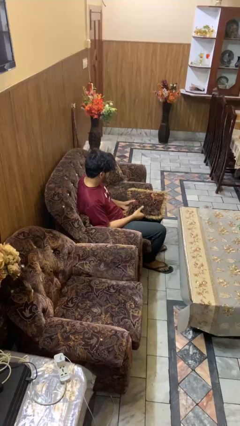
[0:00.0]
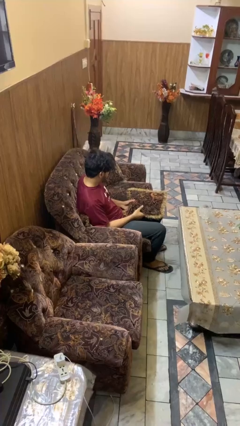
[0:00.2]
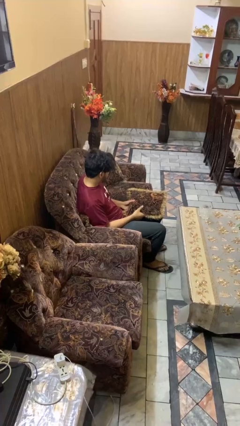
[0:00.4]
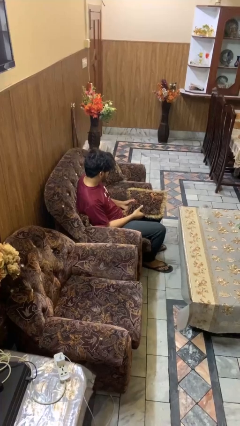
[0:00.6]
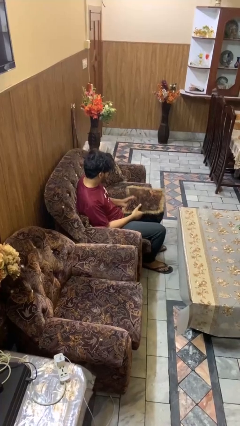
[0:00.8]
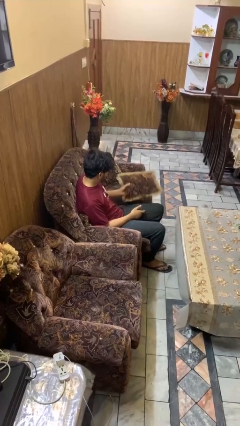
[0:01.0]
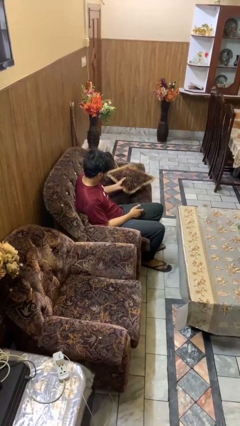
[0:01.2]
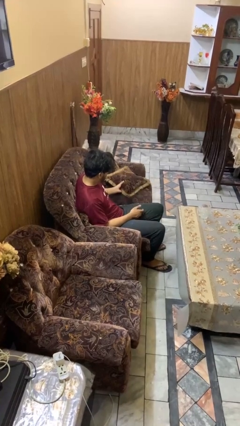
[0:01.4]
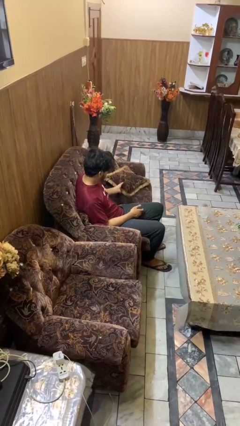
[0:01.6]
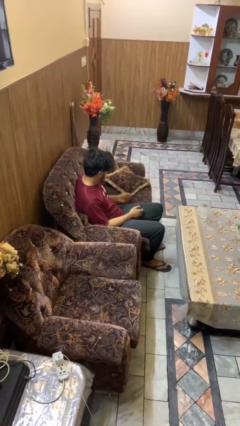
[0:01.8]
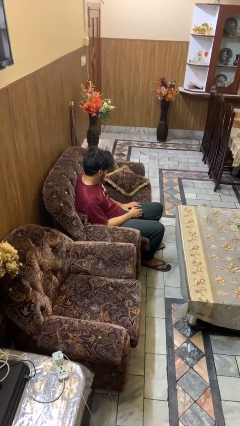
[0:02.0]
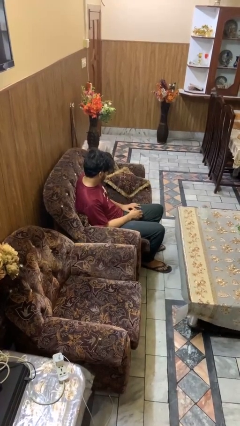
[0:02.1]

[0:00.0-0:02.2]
person puts down object on couch

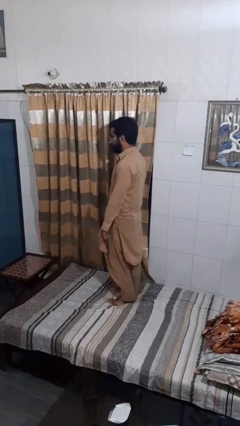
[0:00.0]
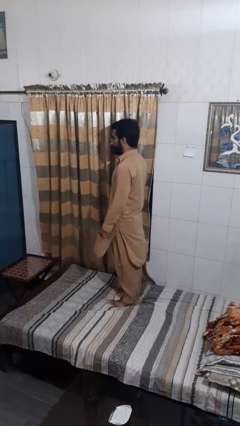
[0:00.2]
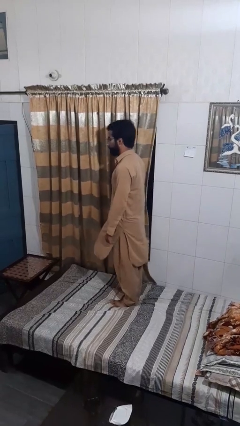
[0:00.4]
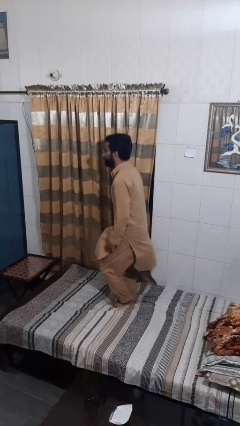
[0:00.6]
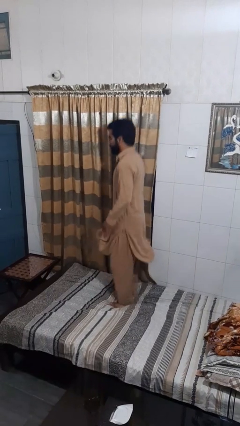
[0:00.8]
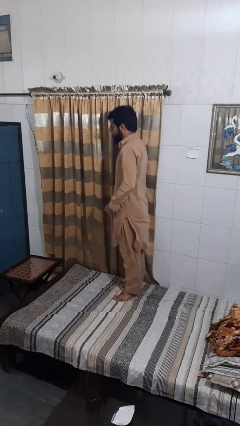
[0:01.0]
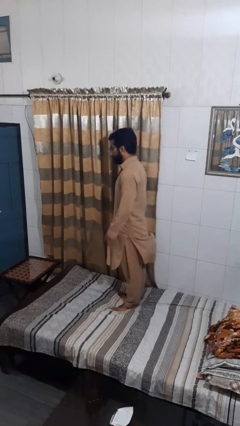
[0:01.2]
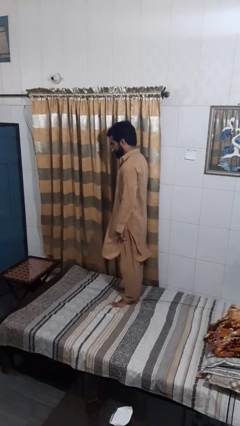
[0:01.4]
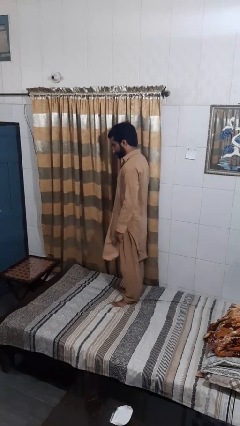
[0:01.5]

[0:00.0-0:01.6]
person jumps on bed

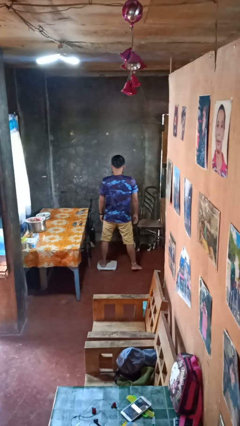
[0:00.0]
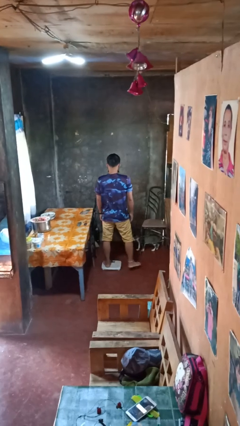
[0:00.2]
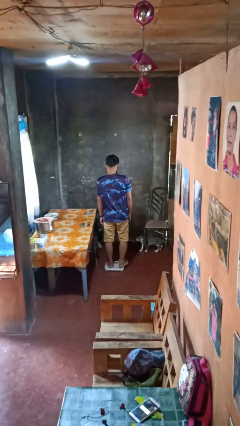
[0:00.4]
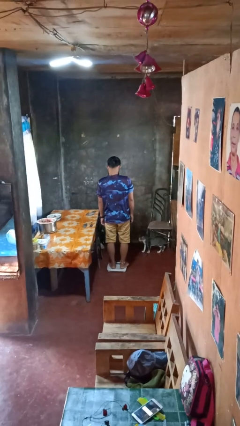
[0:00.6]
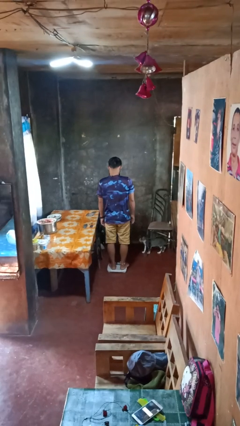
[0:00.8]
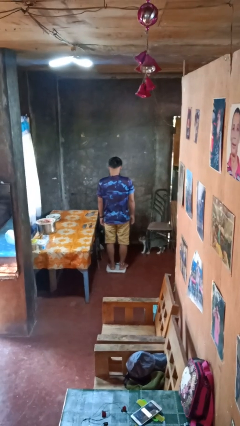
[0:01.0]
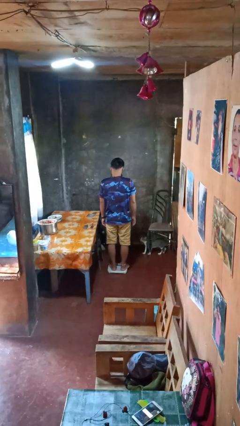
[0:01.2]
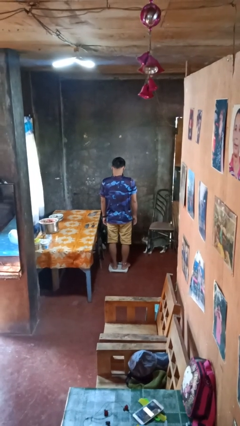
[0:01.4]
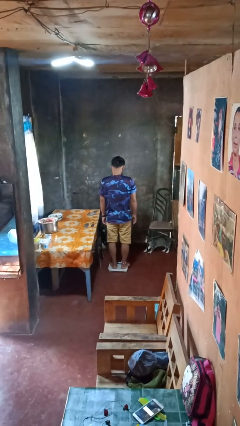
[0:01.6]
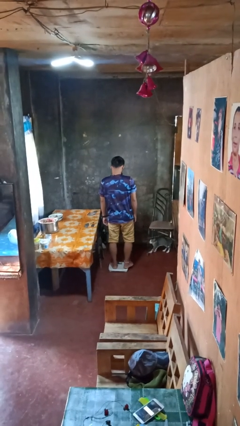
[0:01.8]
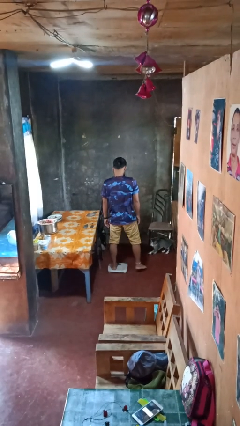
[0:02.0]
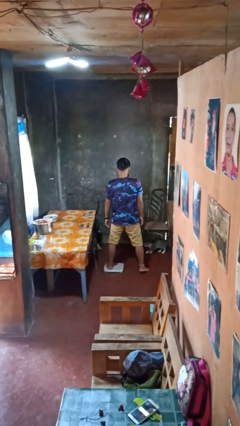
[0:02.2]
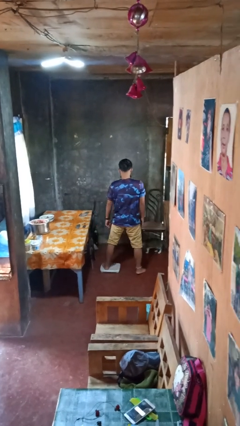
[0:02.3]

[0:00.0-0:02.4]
person uses bodyweight scale

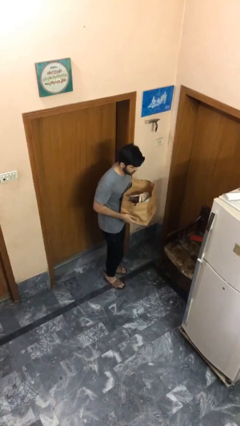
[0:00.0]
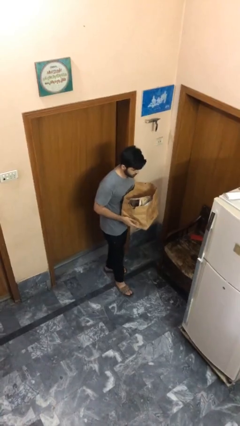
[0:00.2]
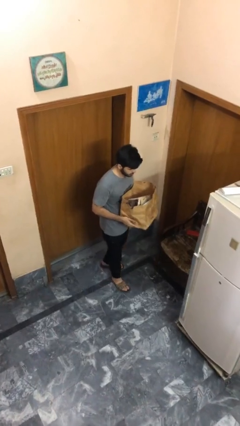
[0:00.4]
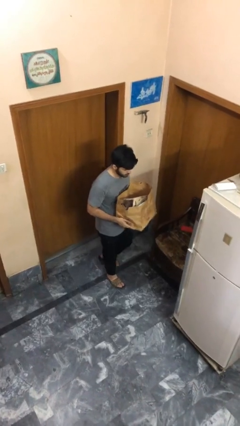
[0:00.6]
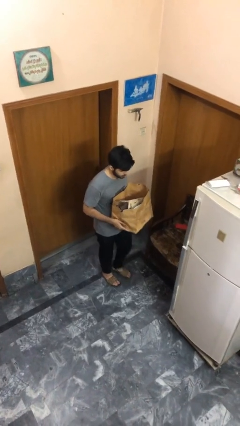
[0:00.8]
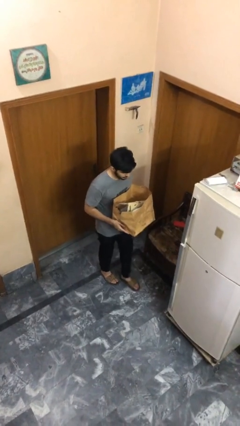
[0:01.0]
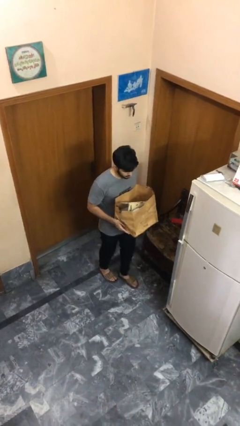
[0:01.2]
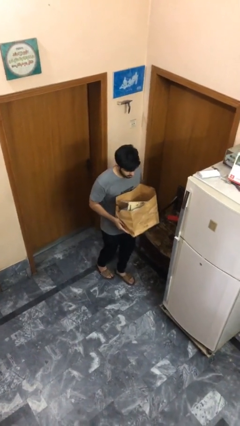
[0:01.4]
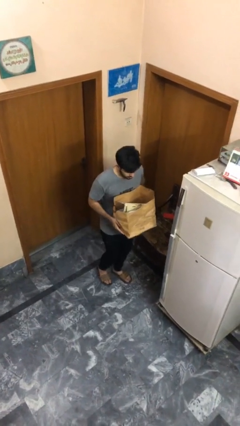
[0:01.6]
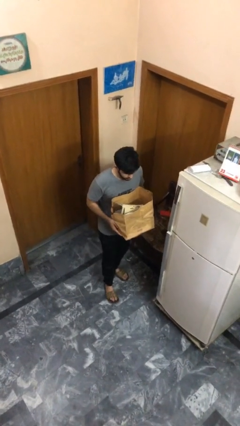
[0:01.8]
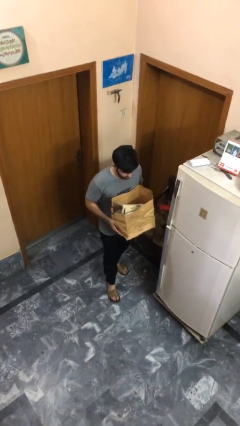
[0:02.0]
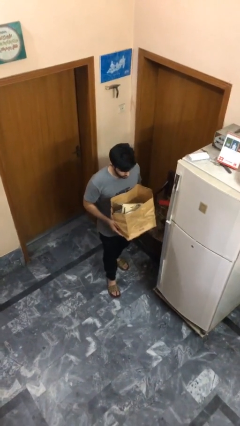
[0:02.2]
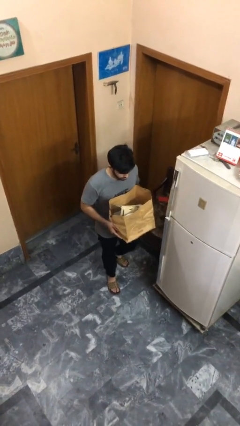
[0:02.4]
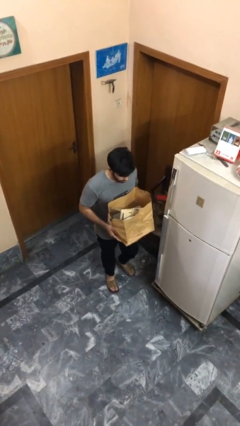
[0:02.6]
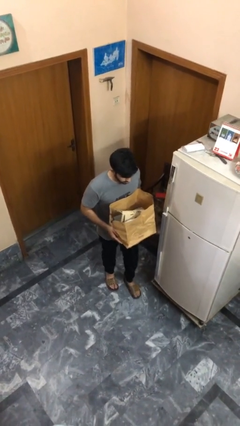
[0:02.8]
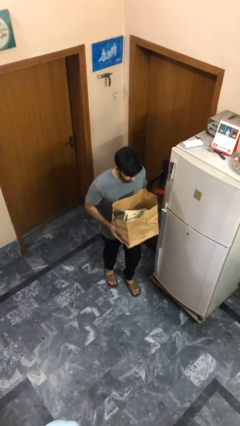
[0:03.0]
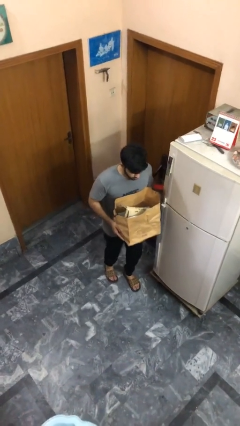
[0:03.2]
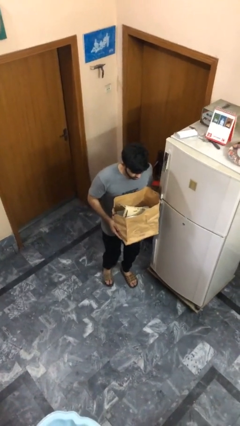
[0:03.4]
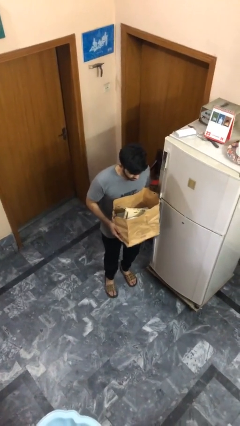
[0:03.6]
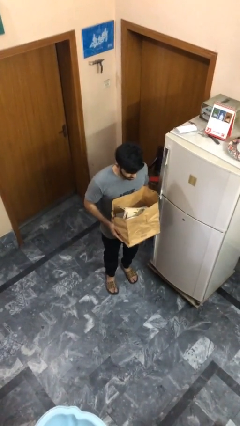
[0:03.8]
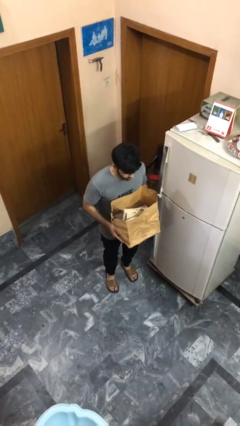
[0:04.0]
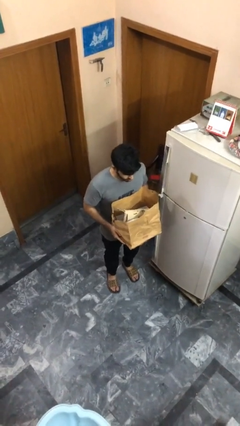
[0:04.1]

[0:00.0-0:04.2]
person carries groceries

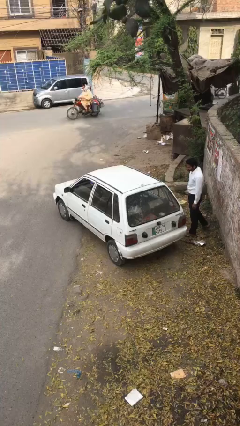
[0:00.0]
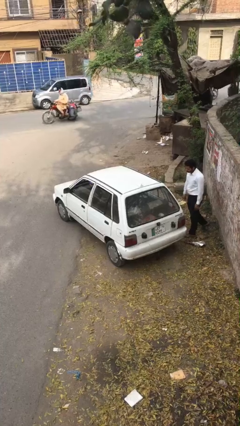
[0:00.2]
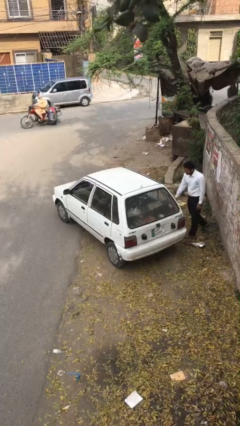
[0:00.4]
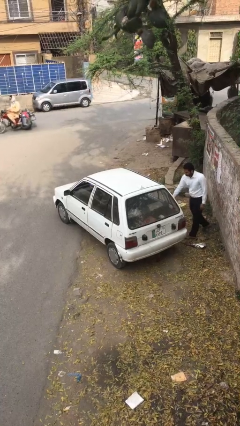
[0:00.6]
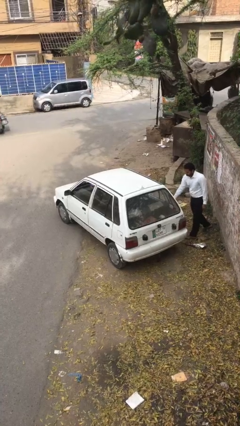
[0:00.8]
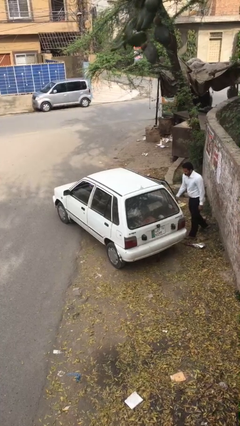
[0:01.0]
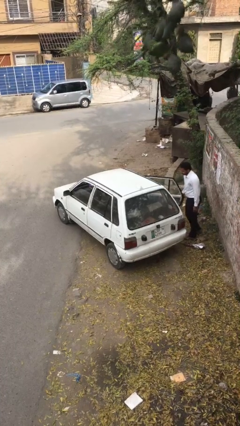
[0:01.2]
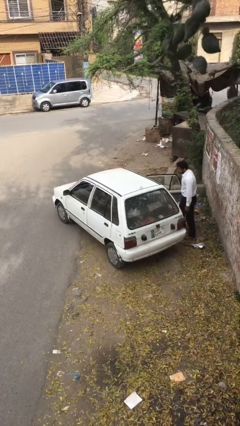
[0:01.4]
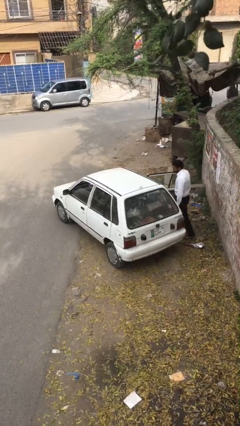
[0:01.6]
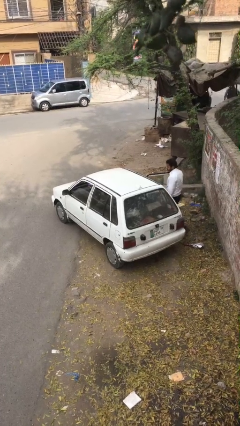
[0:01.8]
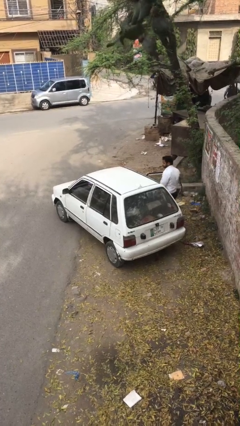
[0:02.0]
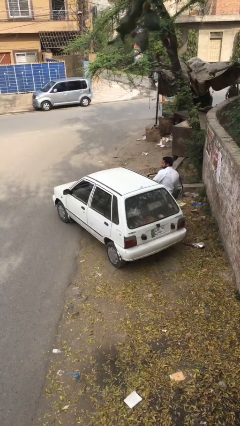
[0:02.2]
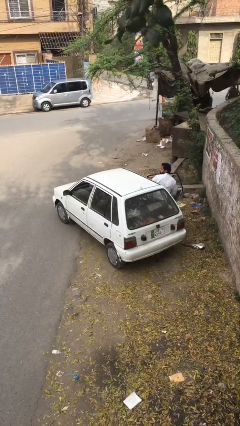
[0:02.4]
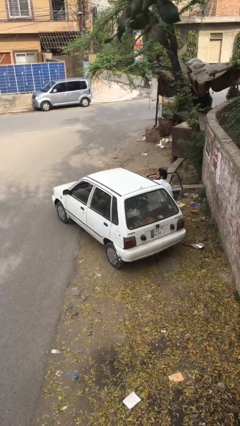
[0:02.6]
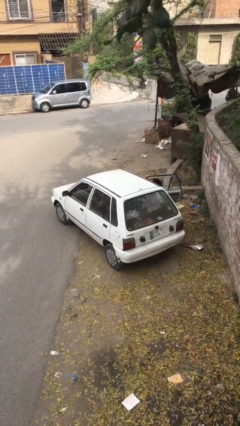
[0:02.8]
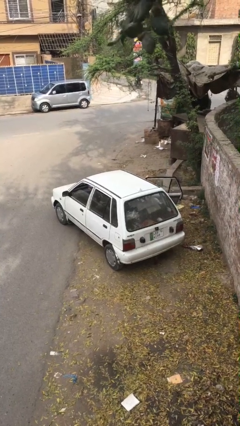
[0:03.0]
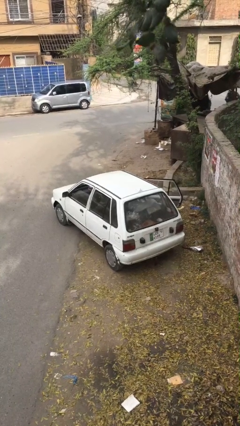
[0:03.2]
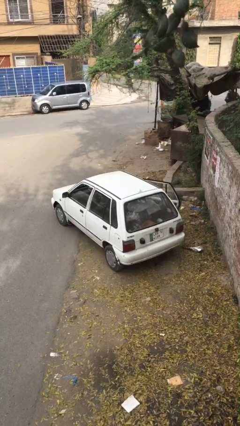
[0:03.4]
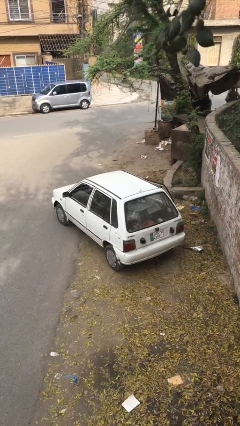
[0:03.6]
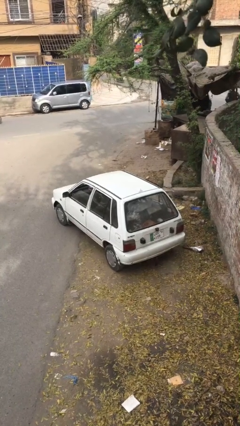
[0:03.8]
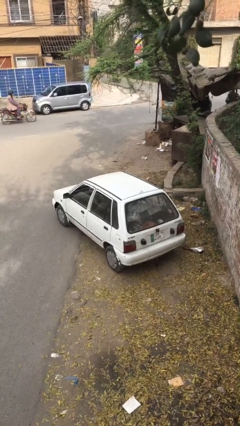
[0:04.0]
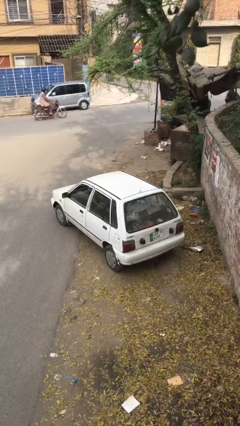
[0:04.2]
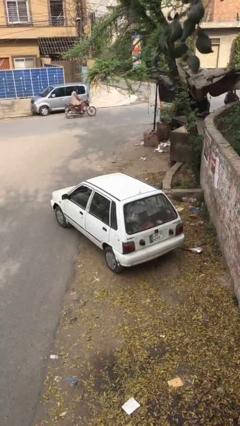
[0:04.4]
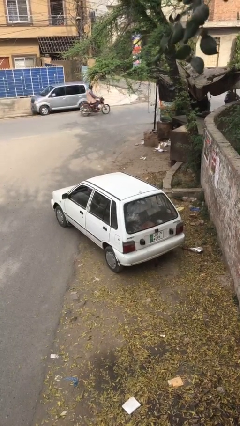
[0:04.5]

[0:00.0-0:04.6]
car picks up person

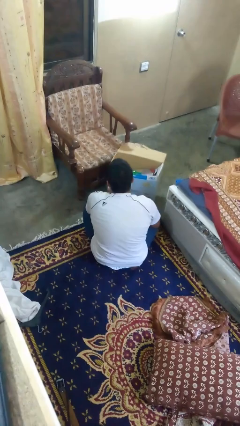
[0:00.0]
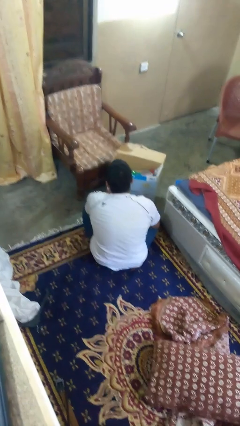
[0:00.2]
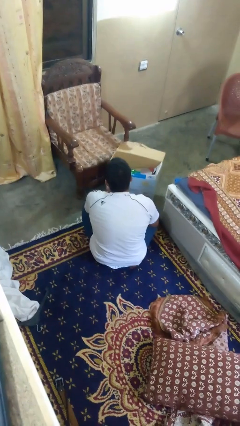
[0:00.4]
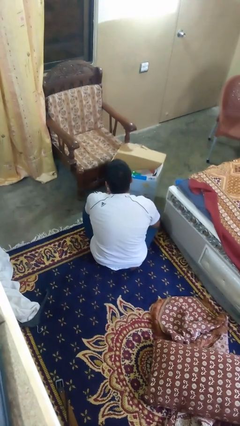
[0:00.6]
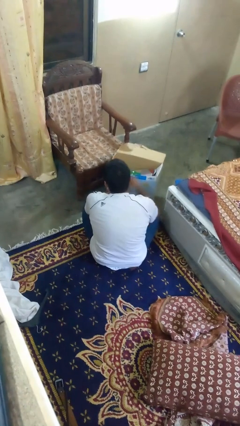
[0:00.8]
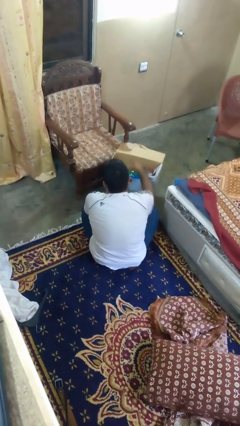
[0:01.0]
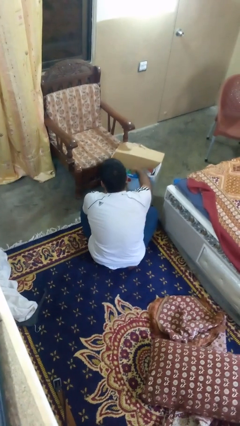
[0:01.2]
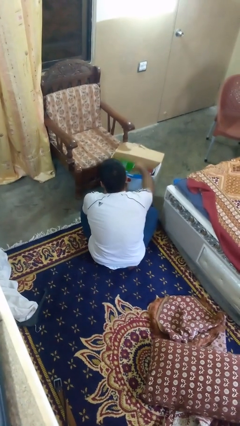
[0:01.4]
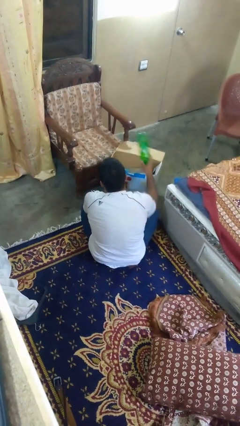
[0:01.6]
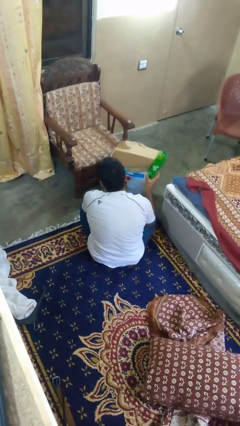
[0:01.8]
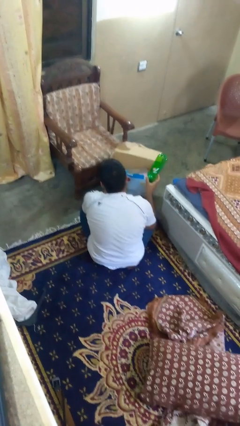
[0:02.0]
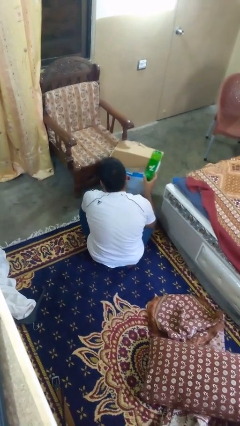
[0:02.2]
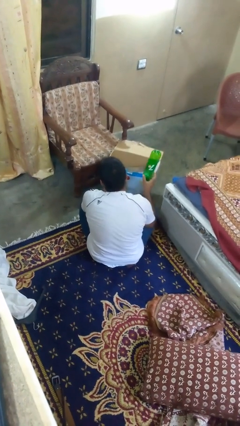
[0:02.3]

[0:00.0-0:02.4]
person takes object from box
